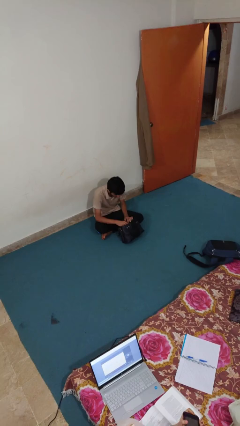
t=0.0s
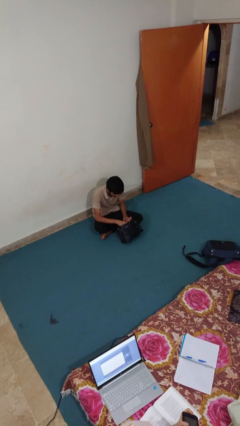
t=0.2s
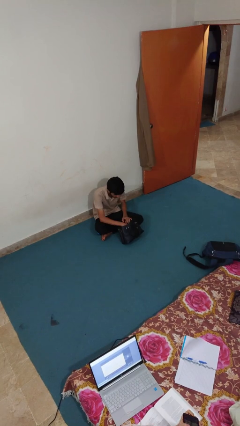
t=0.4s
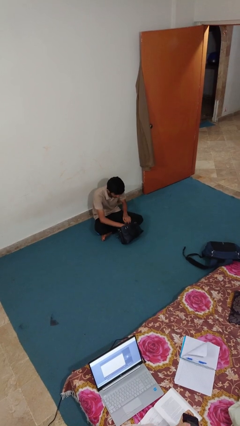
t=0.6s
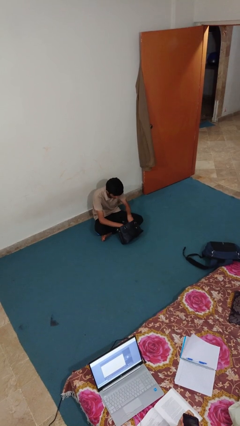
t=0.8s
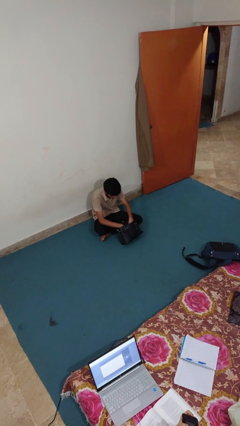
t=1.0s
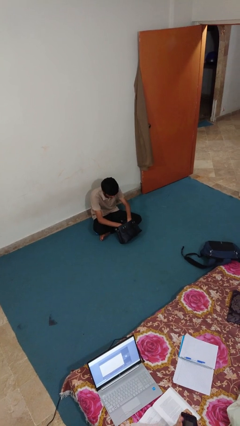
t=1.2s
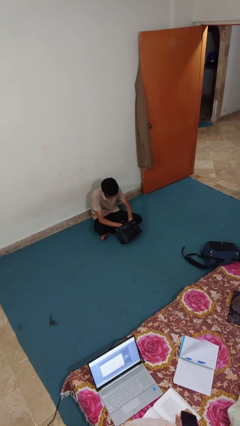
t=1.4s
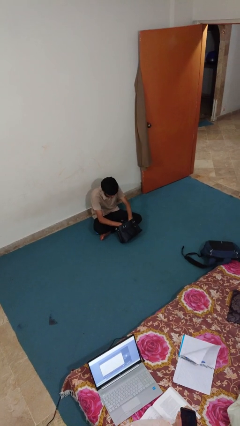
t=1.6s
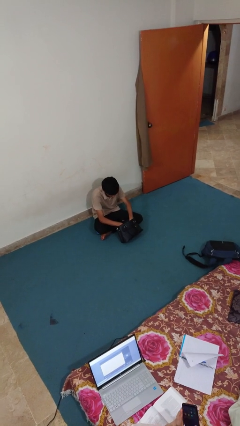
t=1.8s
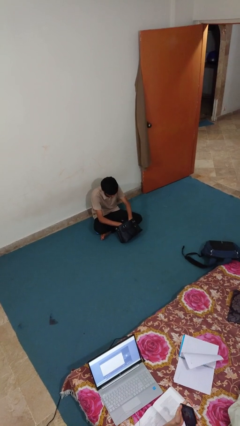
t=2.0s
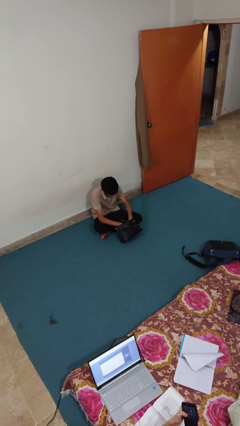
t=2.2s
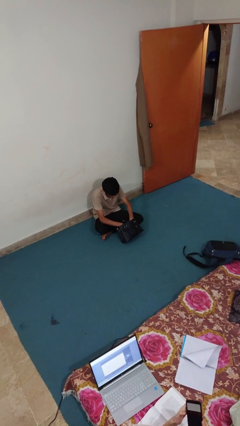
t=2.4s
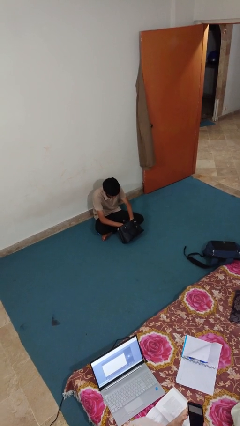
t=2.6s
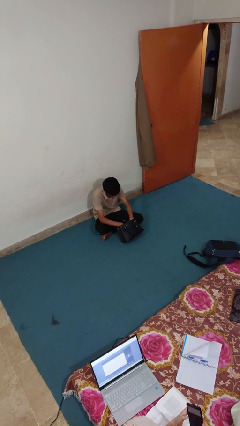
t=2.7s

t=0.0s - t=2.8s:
person searches in purse

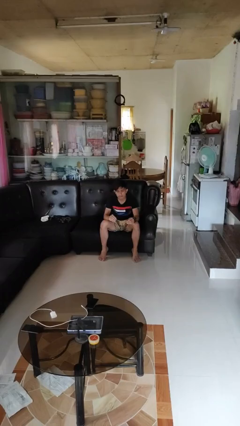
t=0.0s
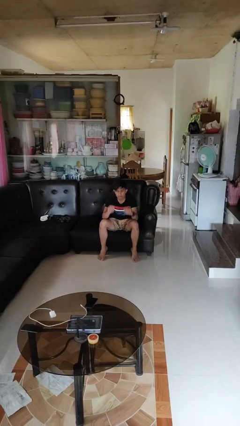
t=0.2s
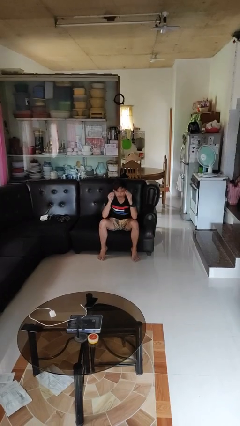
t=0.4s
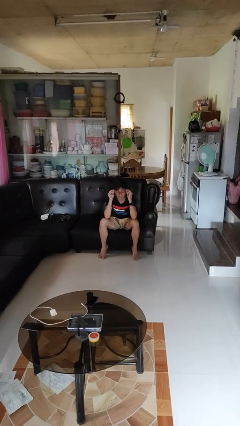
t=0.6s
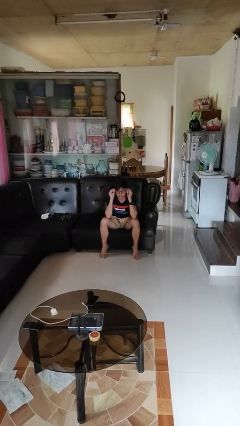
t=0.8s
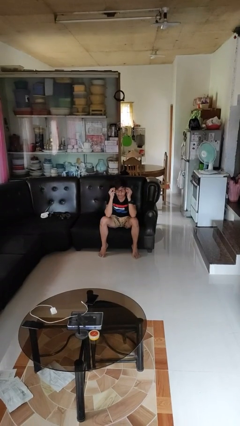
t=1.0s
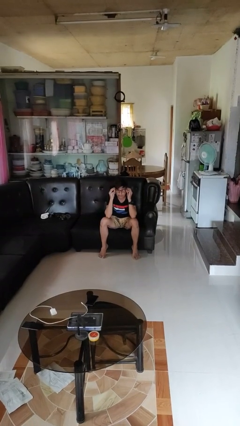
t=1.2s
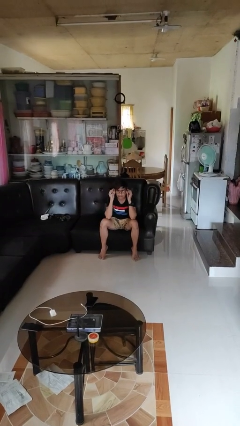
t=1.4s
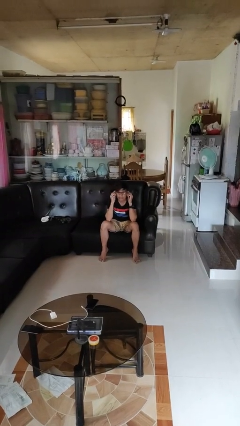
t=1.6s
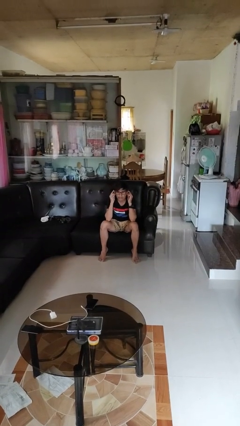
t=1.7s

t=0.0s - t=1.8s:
person puts on glasses

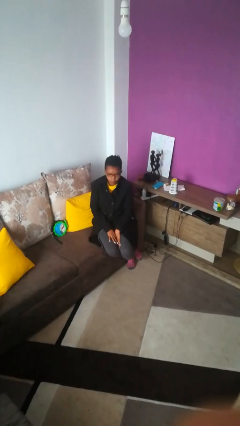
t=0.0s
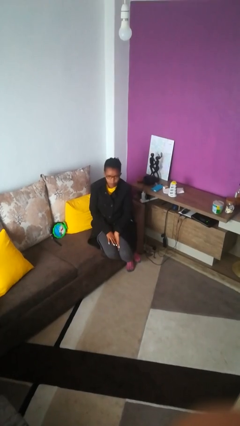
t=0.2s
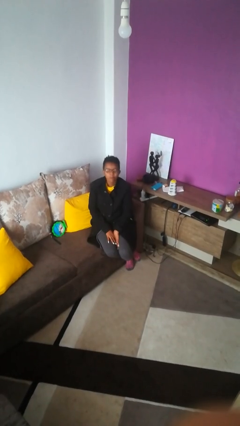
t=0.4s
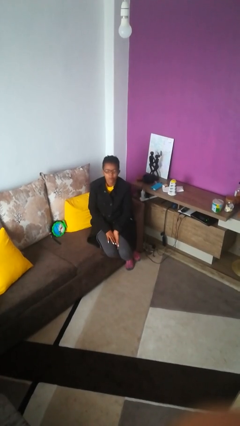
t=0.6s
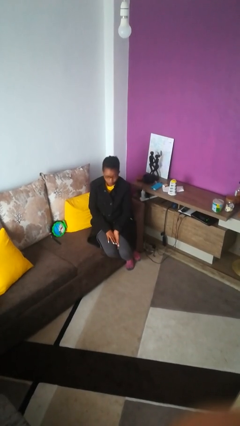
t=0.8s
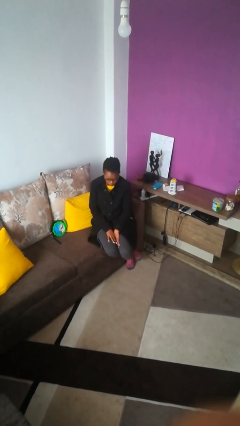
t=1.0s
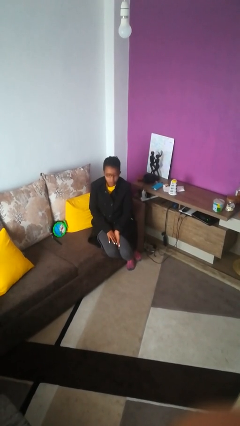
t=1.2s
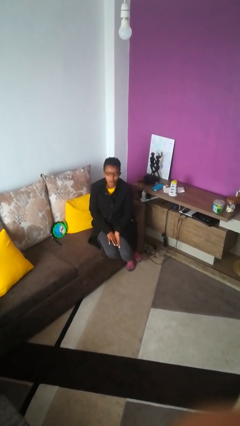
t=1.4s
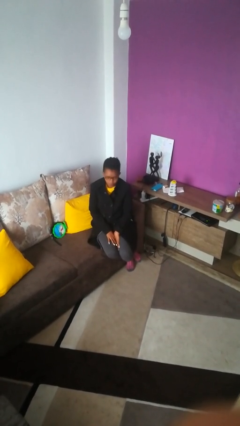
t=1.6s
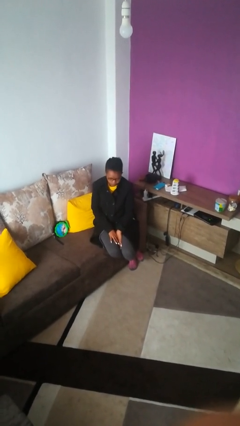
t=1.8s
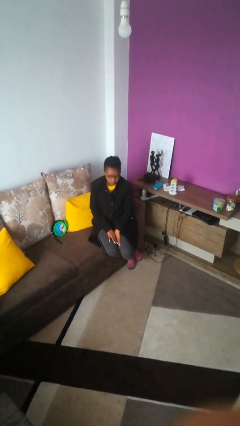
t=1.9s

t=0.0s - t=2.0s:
person nods head

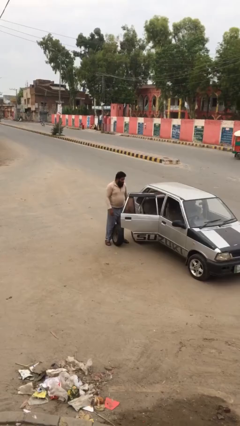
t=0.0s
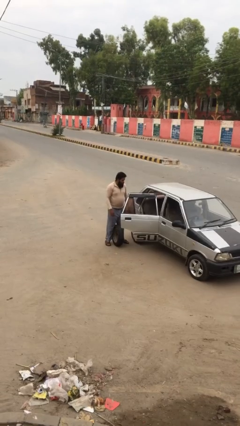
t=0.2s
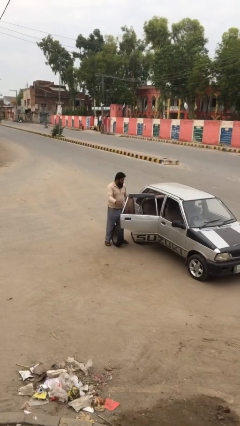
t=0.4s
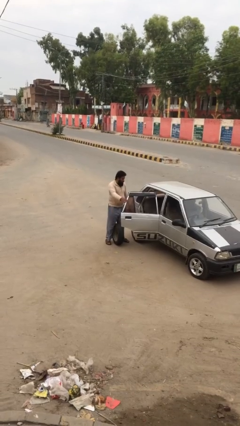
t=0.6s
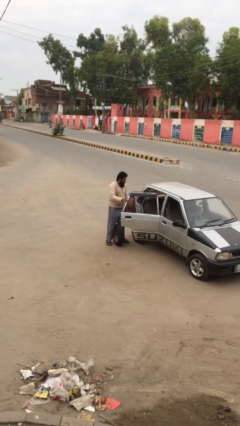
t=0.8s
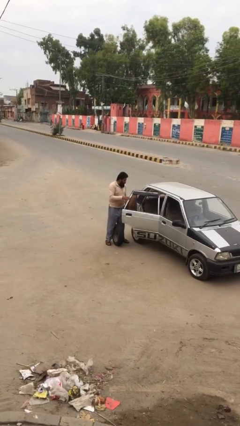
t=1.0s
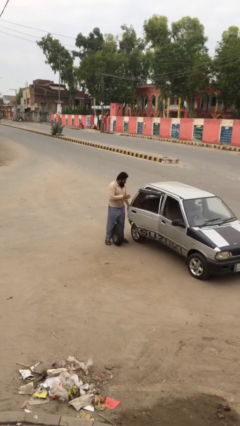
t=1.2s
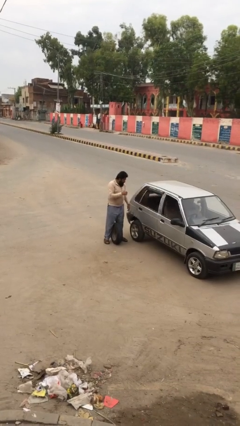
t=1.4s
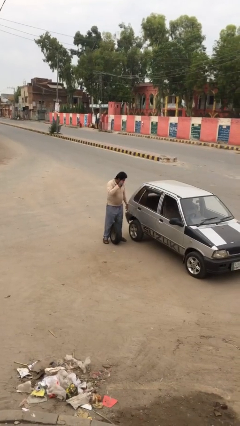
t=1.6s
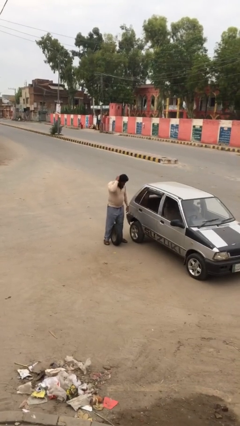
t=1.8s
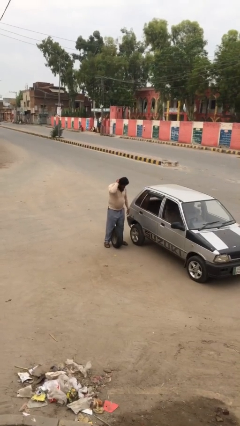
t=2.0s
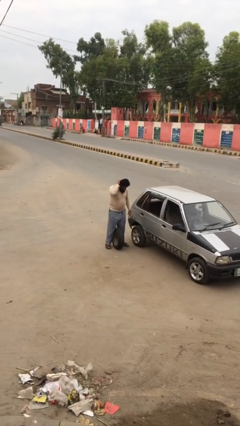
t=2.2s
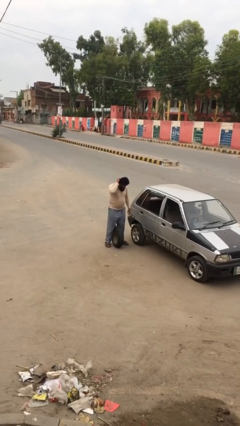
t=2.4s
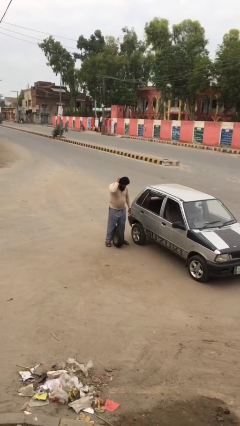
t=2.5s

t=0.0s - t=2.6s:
person closes car door

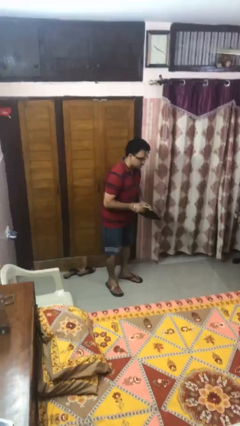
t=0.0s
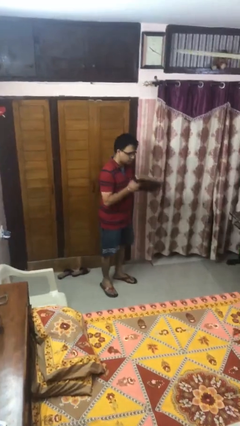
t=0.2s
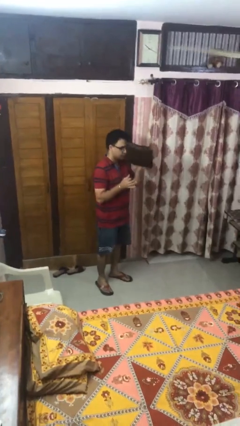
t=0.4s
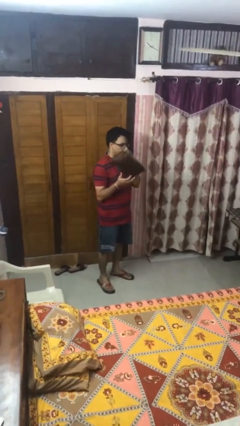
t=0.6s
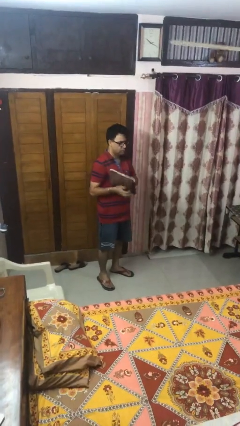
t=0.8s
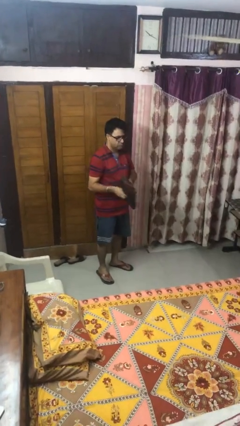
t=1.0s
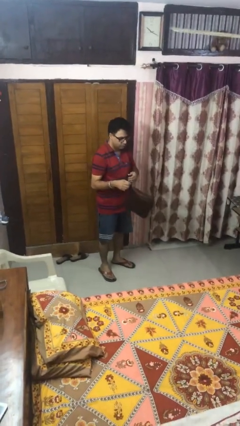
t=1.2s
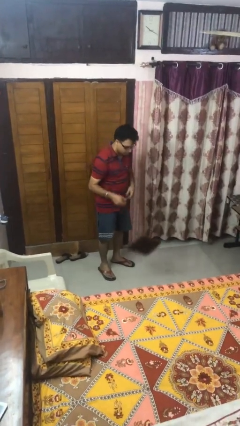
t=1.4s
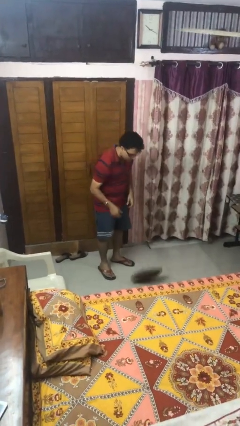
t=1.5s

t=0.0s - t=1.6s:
person drops object

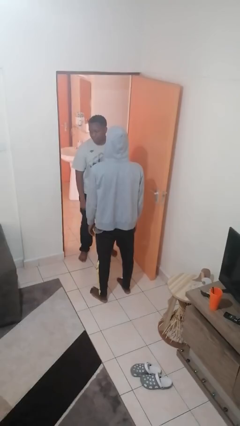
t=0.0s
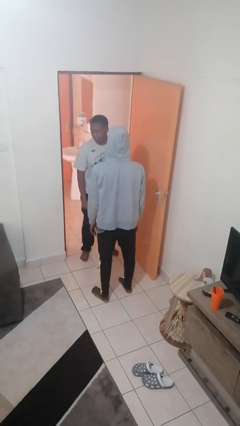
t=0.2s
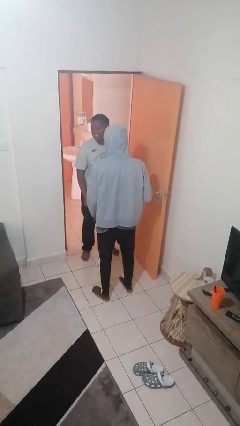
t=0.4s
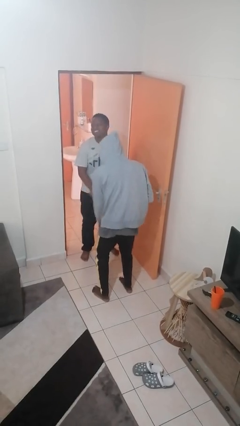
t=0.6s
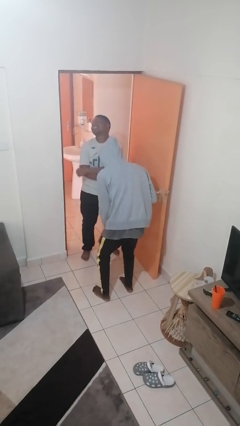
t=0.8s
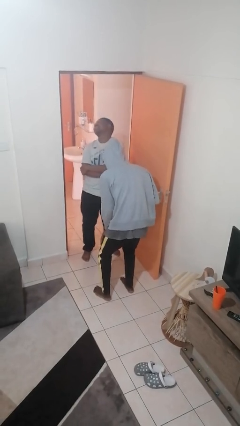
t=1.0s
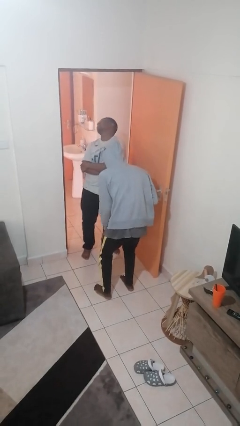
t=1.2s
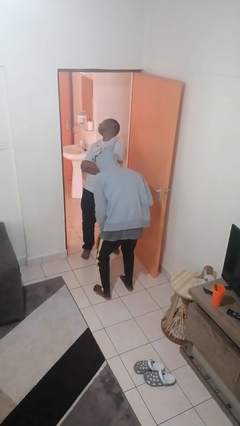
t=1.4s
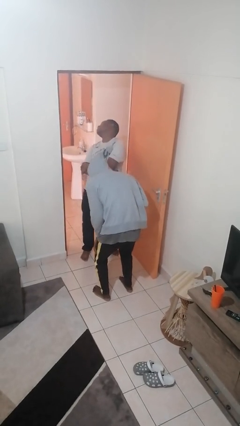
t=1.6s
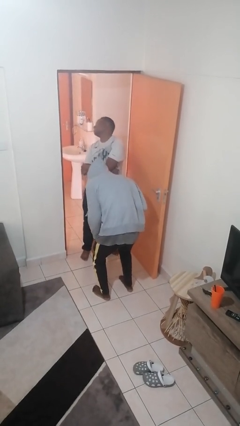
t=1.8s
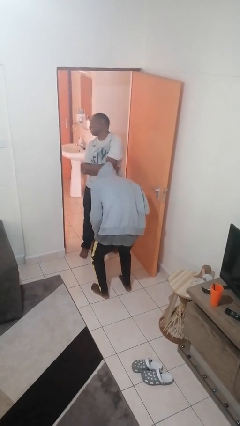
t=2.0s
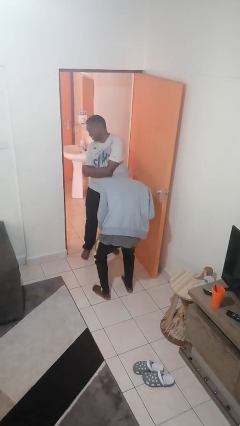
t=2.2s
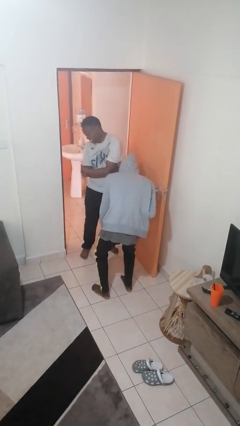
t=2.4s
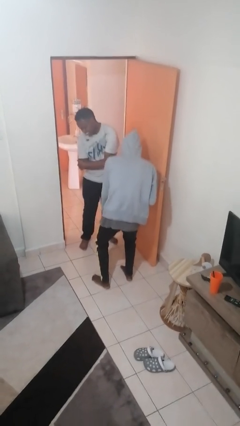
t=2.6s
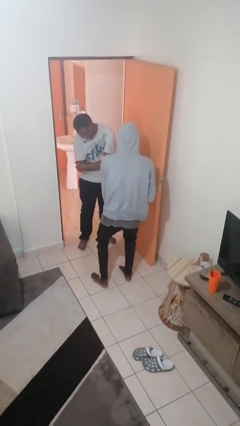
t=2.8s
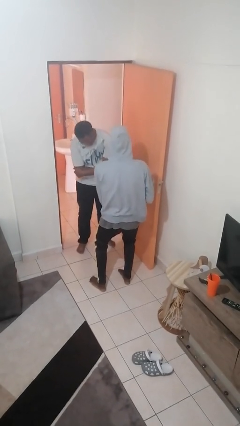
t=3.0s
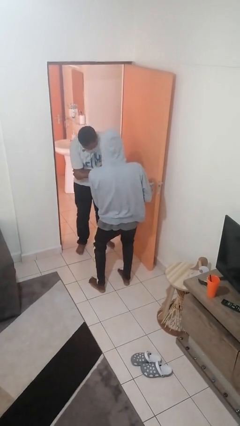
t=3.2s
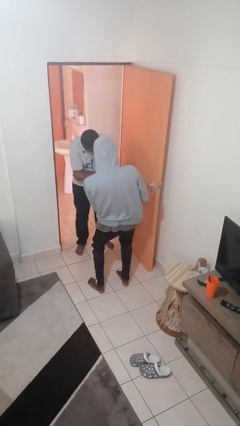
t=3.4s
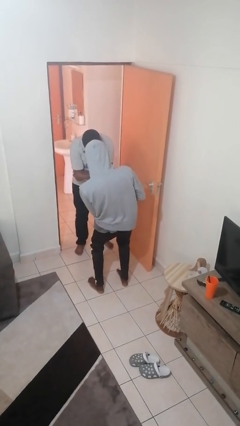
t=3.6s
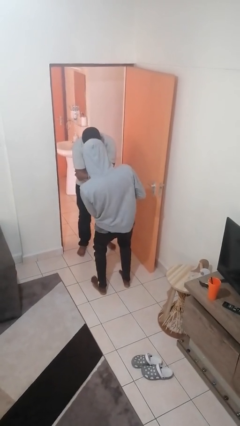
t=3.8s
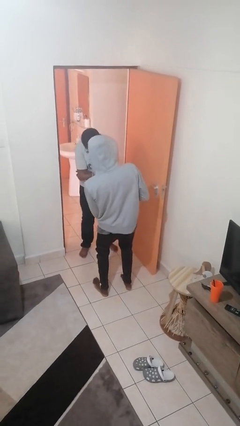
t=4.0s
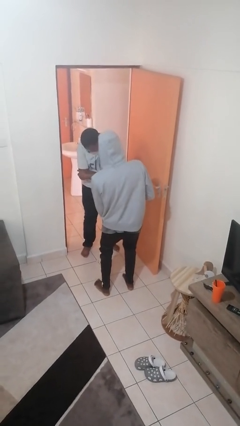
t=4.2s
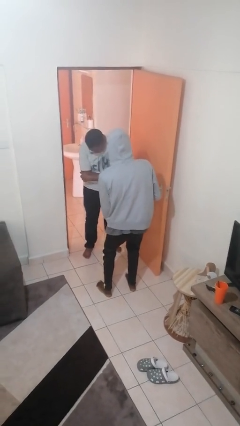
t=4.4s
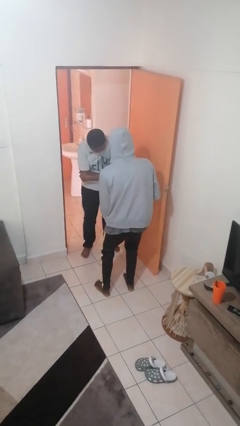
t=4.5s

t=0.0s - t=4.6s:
person laughs with person

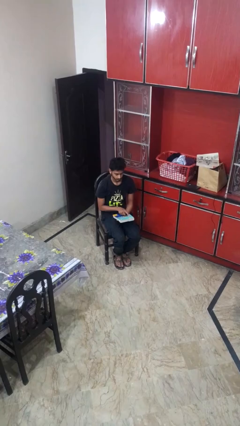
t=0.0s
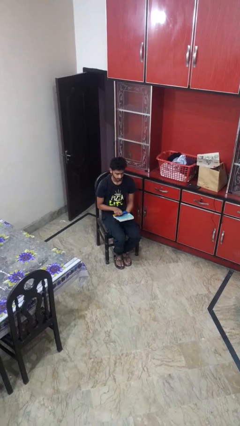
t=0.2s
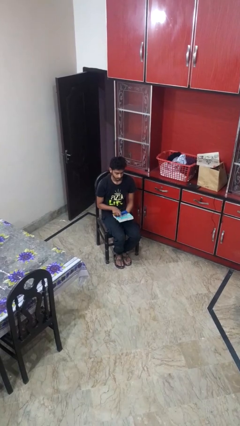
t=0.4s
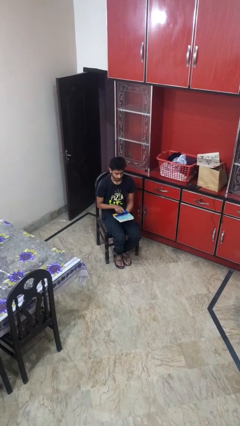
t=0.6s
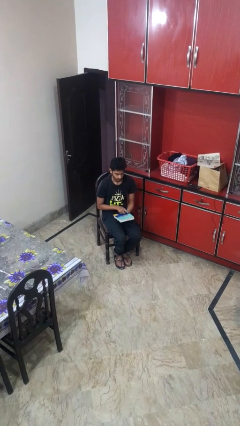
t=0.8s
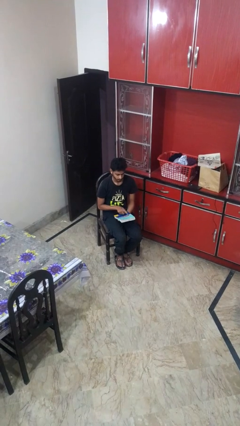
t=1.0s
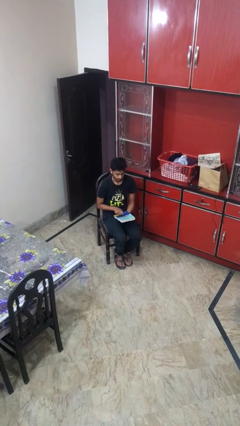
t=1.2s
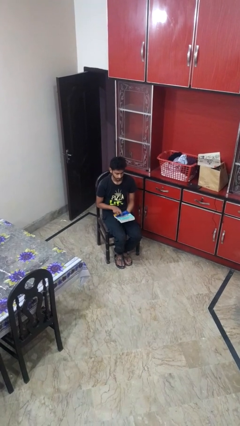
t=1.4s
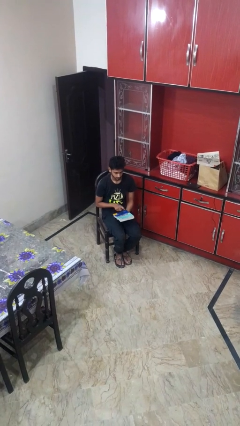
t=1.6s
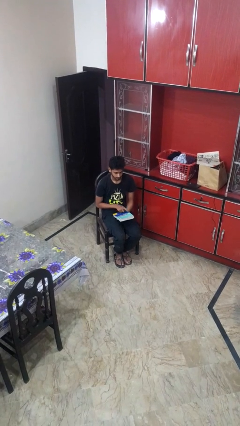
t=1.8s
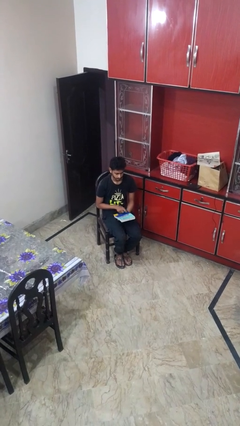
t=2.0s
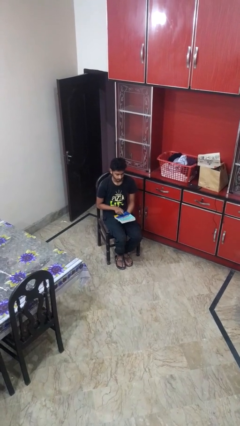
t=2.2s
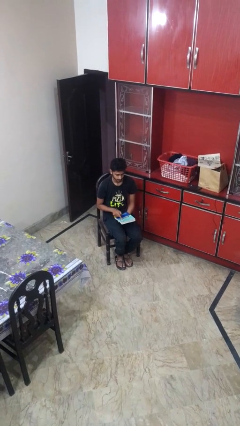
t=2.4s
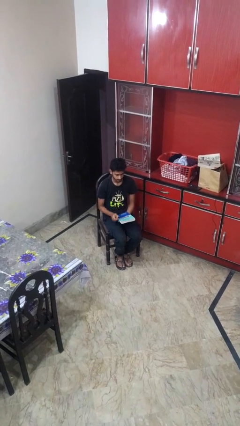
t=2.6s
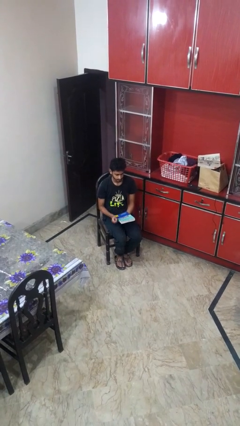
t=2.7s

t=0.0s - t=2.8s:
person taps object with finger
